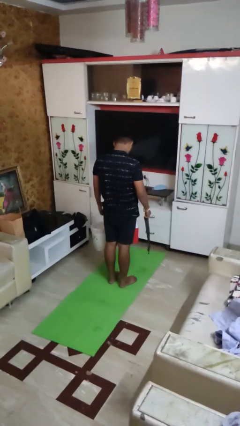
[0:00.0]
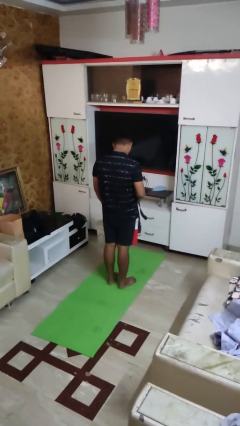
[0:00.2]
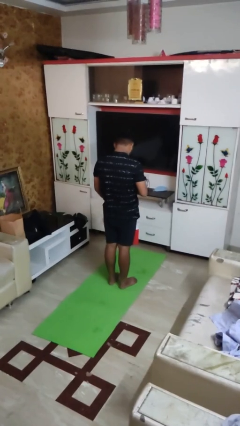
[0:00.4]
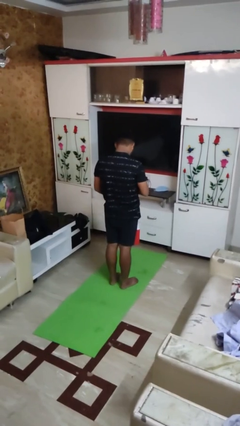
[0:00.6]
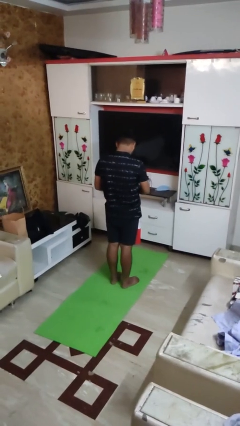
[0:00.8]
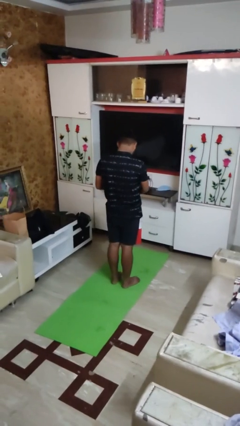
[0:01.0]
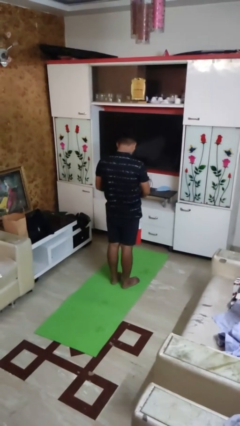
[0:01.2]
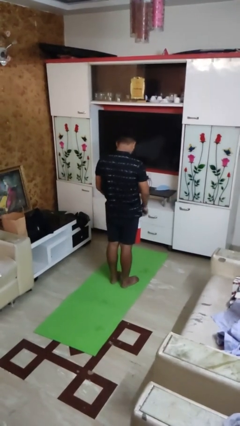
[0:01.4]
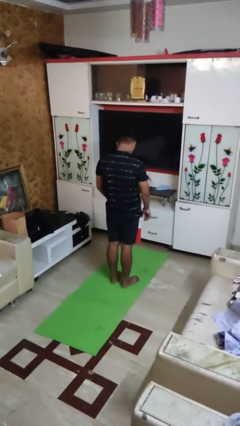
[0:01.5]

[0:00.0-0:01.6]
person puts object into basket

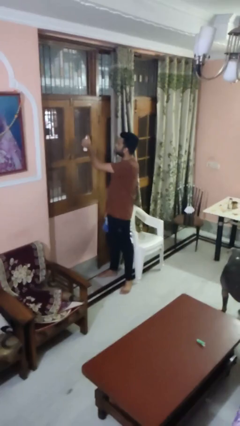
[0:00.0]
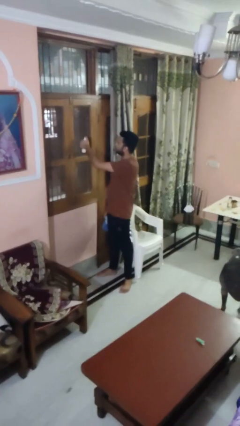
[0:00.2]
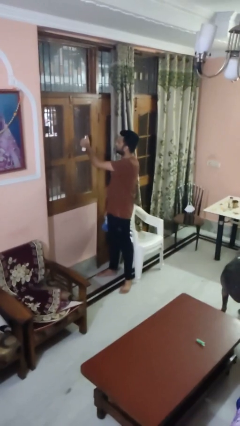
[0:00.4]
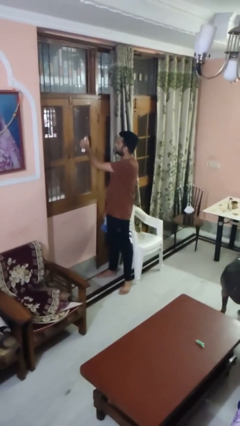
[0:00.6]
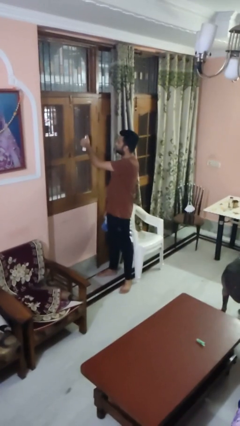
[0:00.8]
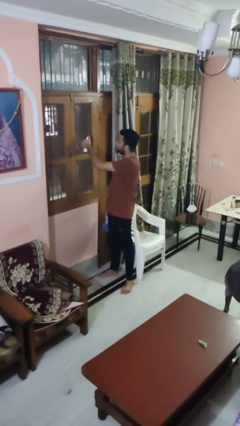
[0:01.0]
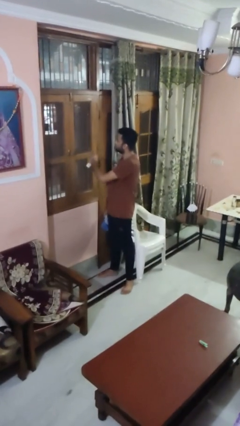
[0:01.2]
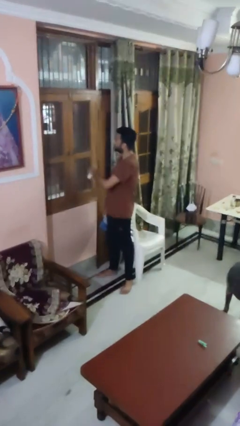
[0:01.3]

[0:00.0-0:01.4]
person sprays from bottle

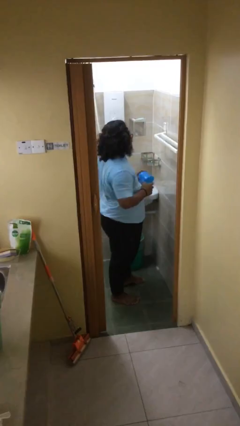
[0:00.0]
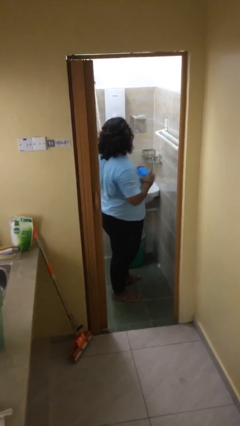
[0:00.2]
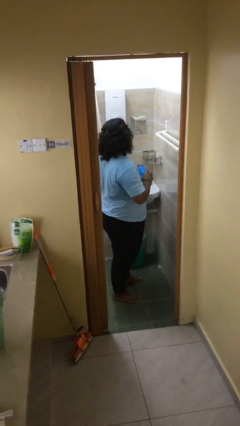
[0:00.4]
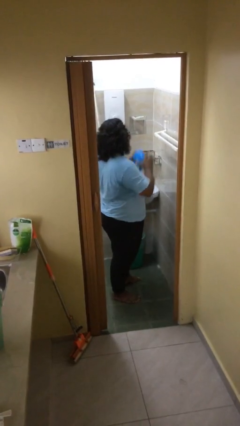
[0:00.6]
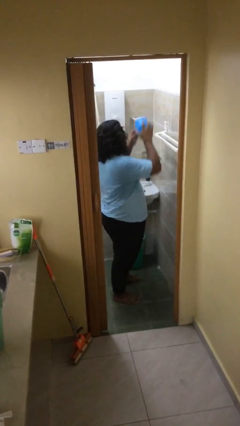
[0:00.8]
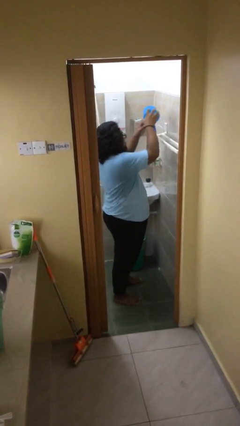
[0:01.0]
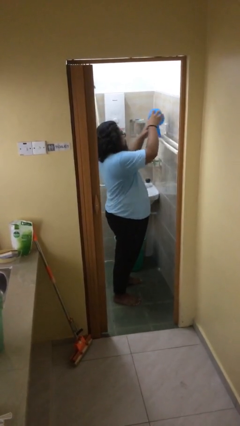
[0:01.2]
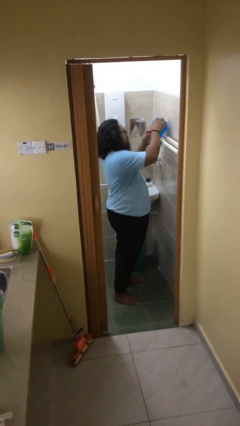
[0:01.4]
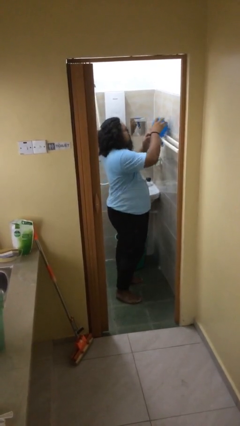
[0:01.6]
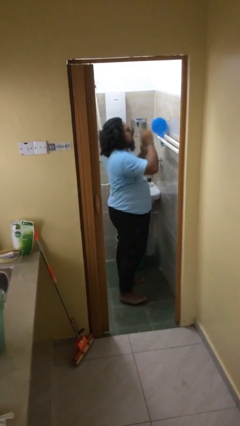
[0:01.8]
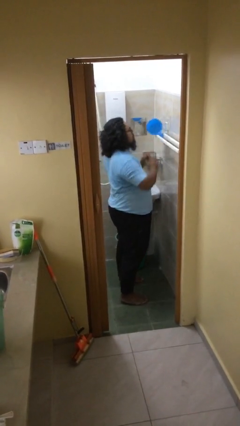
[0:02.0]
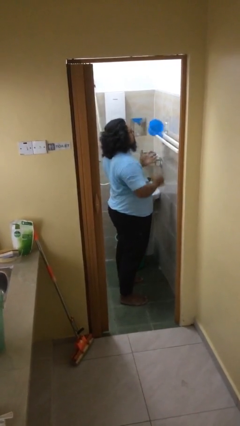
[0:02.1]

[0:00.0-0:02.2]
person puts down object on countertop

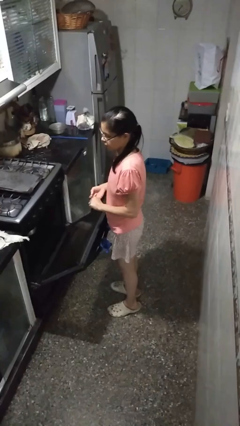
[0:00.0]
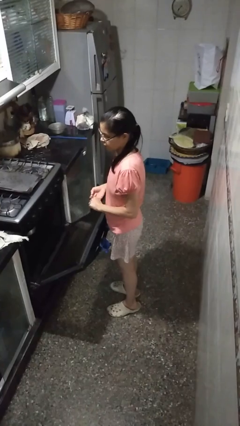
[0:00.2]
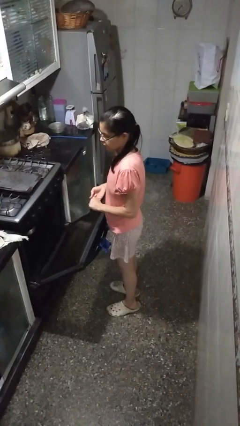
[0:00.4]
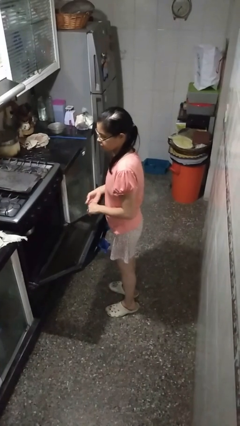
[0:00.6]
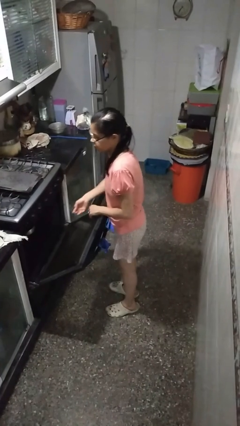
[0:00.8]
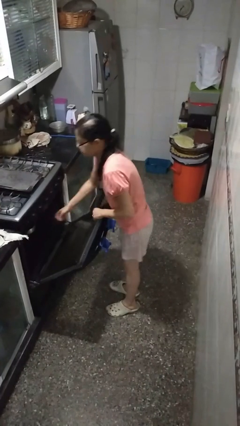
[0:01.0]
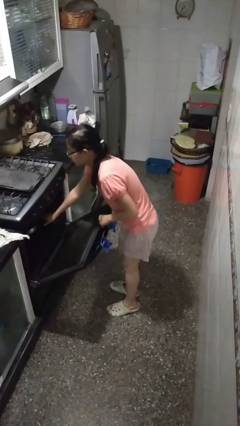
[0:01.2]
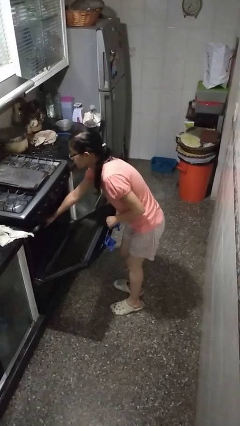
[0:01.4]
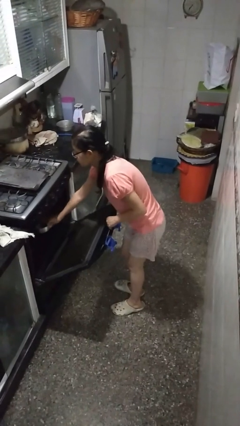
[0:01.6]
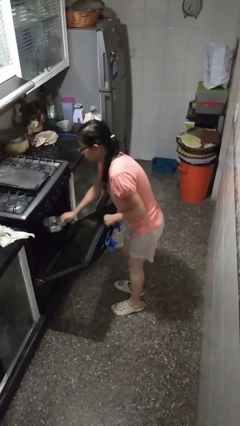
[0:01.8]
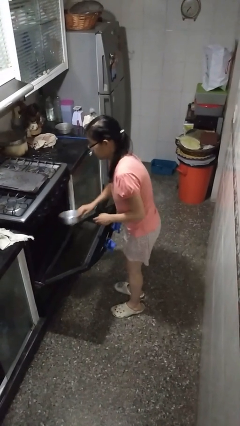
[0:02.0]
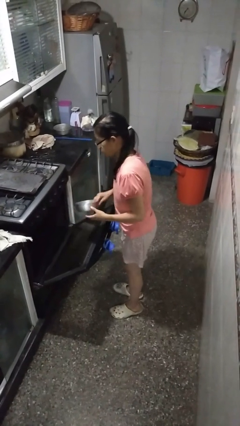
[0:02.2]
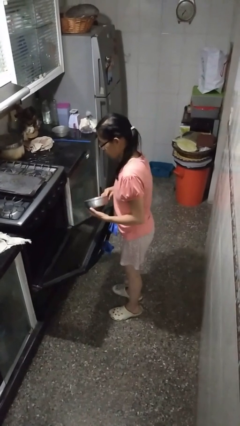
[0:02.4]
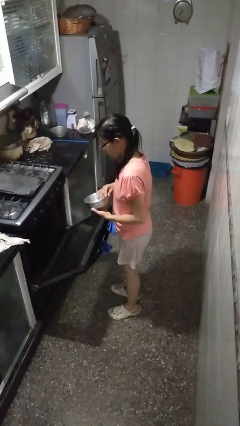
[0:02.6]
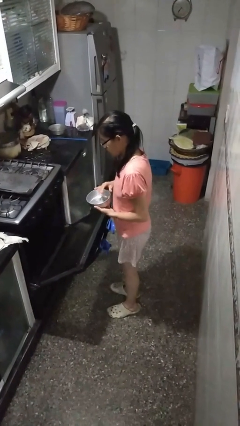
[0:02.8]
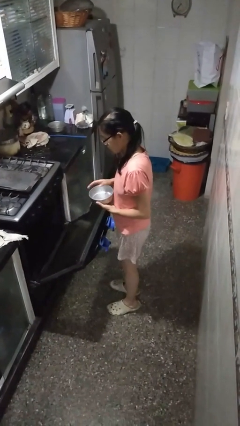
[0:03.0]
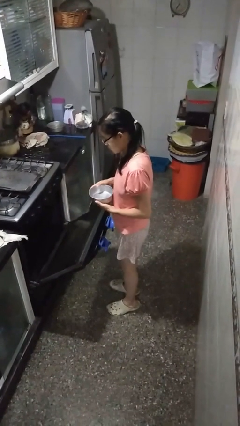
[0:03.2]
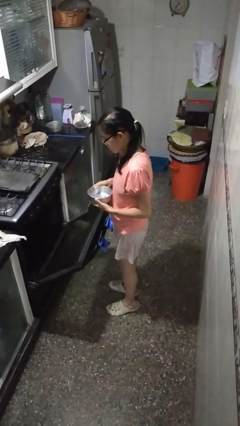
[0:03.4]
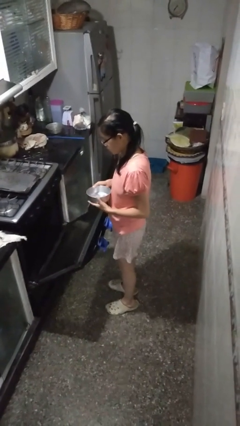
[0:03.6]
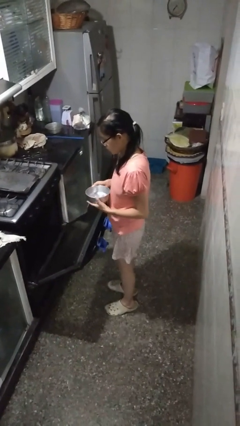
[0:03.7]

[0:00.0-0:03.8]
person takes object from oven

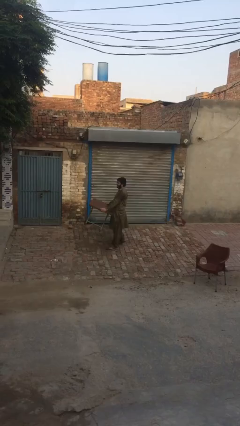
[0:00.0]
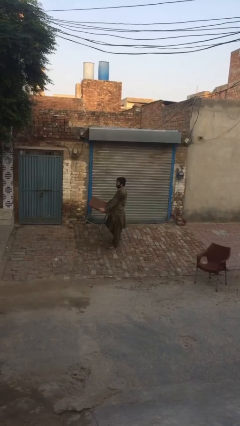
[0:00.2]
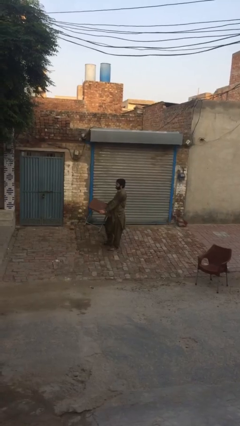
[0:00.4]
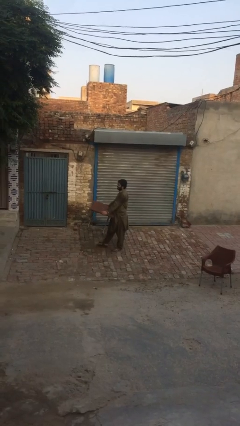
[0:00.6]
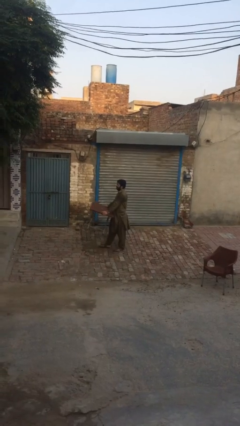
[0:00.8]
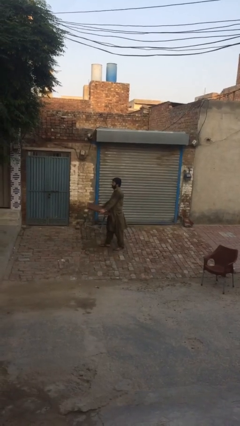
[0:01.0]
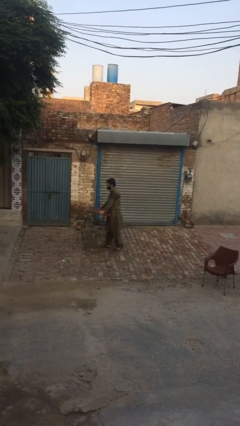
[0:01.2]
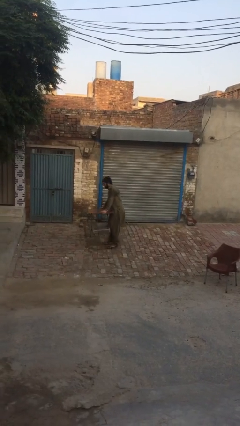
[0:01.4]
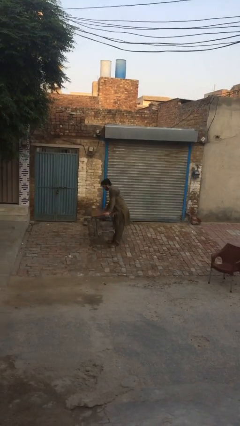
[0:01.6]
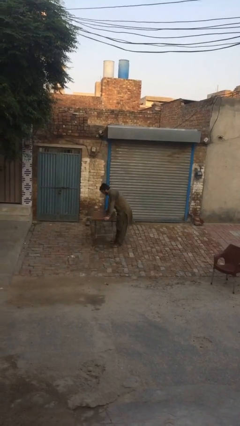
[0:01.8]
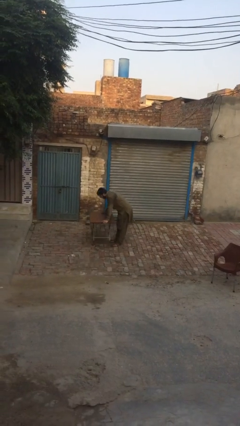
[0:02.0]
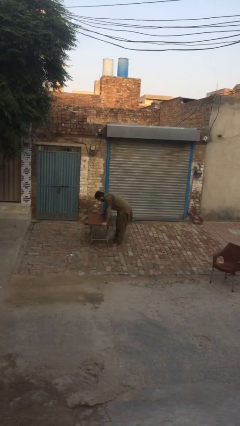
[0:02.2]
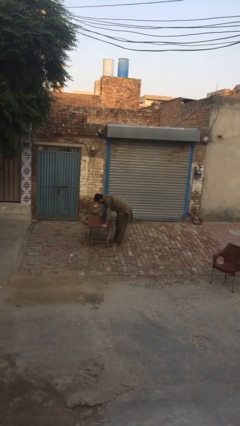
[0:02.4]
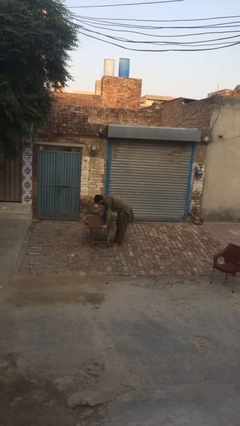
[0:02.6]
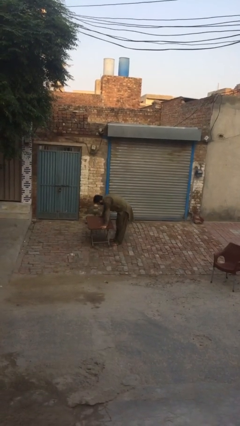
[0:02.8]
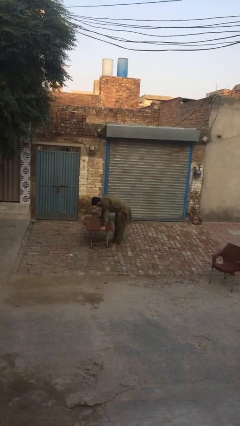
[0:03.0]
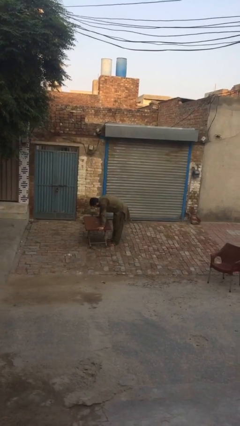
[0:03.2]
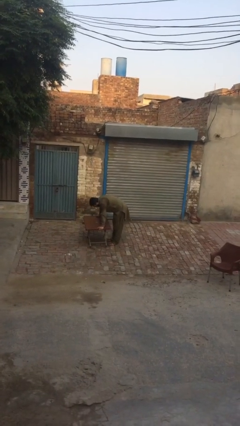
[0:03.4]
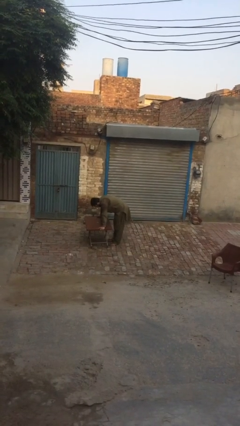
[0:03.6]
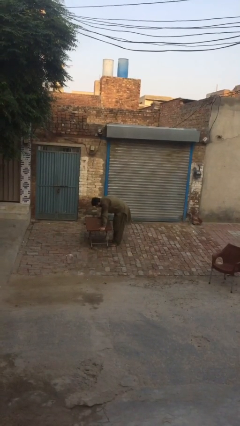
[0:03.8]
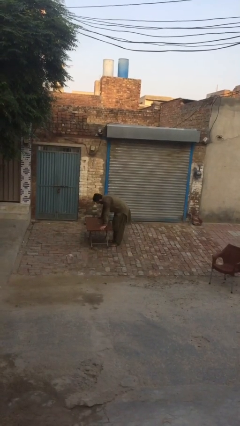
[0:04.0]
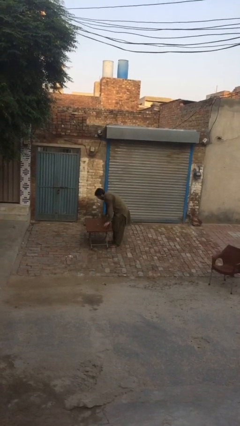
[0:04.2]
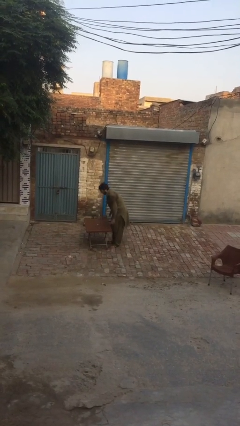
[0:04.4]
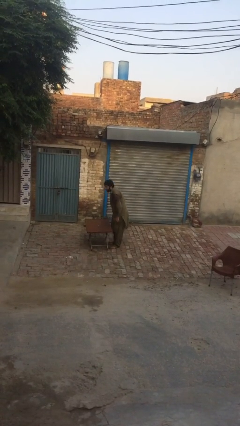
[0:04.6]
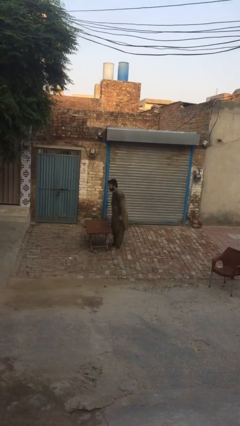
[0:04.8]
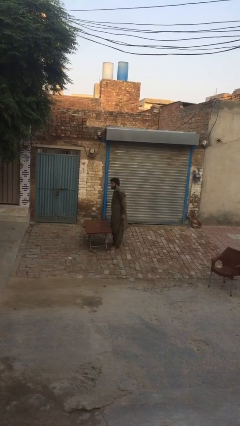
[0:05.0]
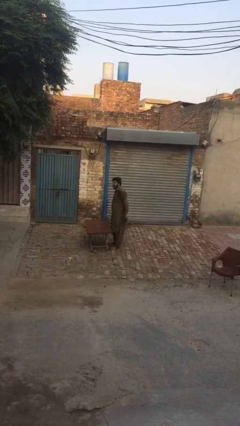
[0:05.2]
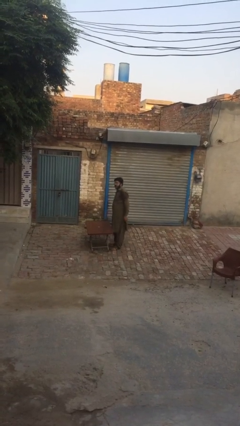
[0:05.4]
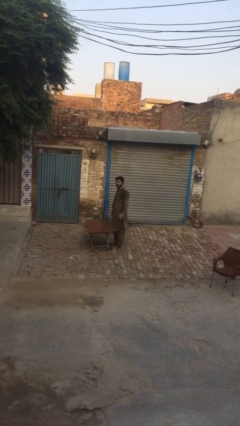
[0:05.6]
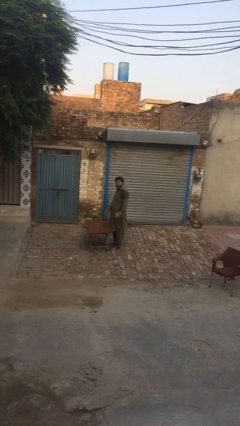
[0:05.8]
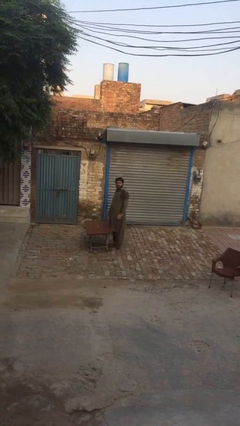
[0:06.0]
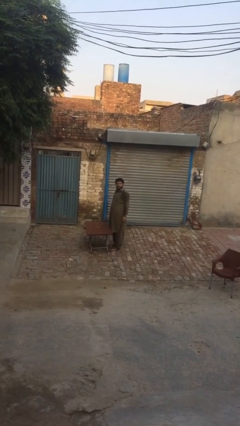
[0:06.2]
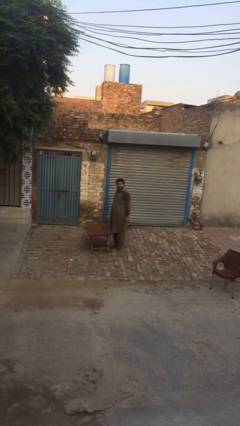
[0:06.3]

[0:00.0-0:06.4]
person puts down object on floor

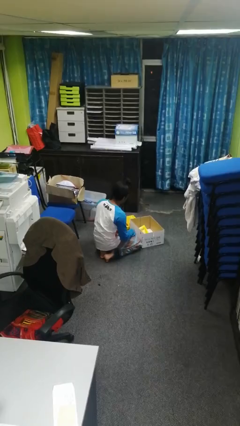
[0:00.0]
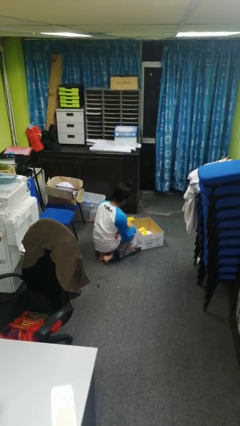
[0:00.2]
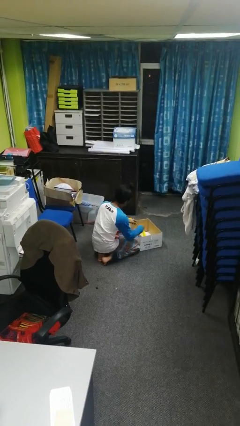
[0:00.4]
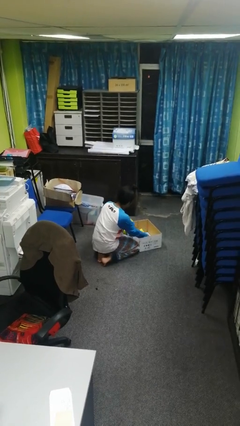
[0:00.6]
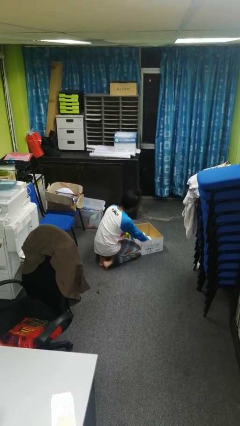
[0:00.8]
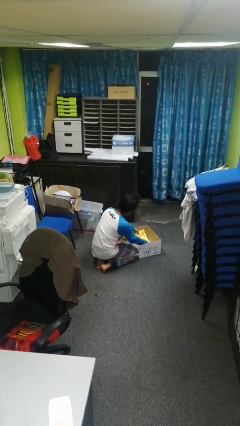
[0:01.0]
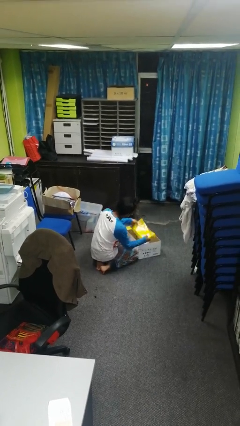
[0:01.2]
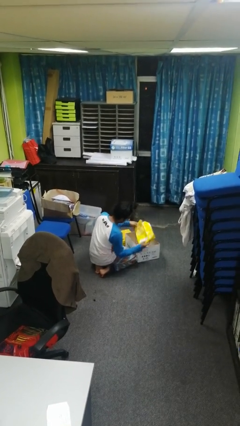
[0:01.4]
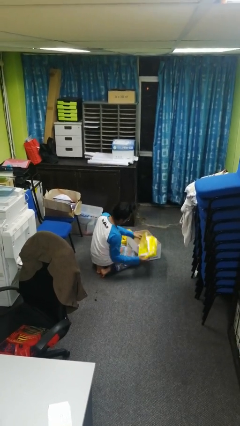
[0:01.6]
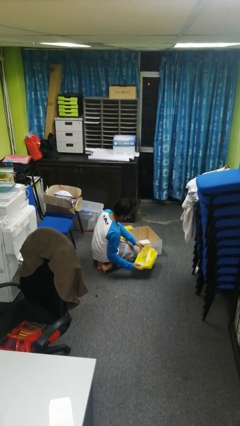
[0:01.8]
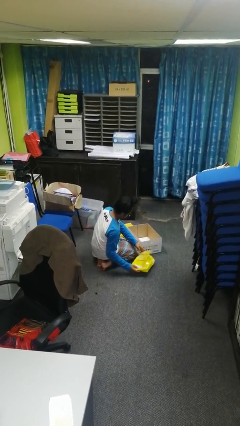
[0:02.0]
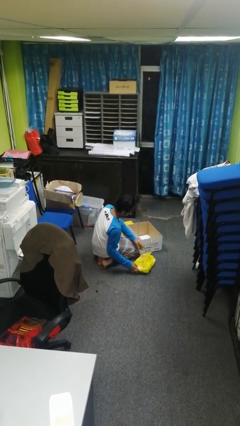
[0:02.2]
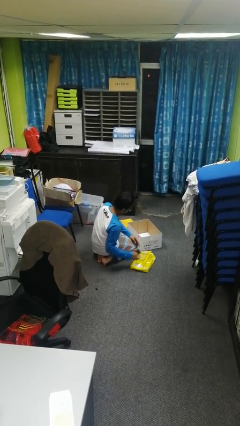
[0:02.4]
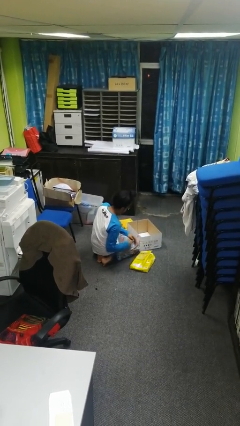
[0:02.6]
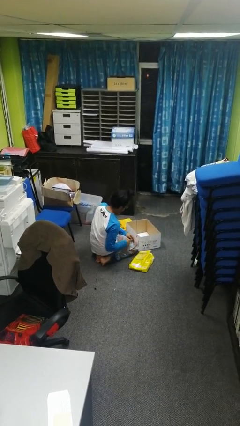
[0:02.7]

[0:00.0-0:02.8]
person takes object from box
